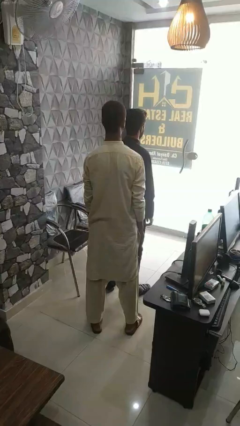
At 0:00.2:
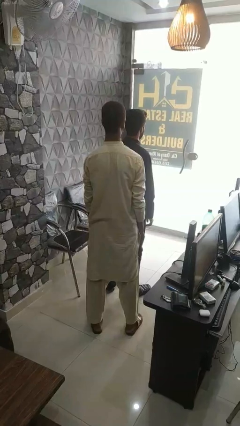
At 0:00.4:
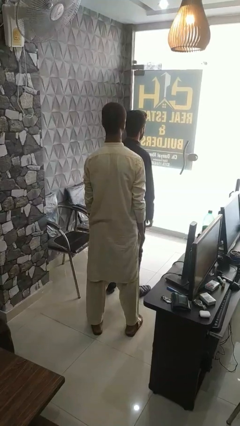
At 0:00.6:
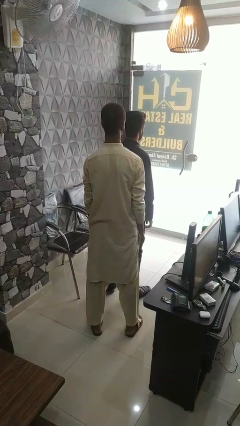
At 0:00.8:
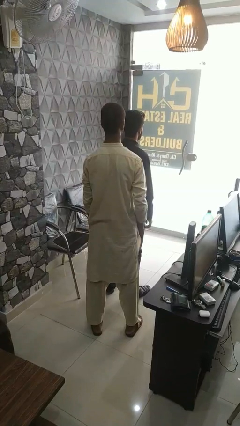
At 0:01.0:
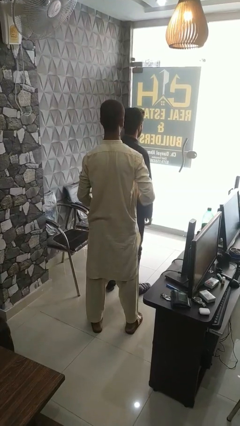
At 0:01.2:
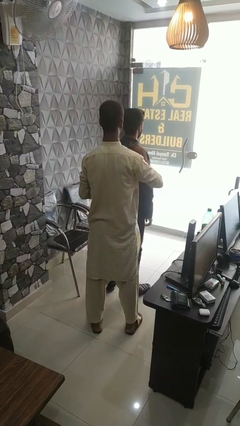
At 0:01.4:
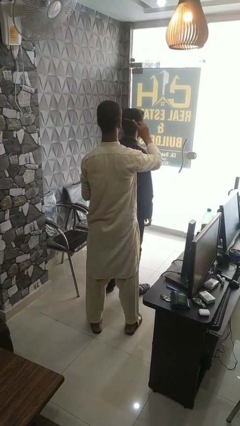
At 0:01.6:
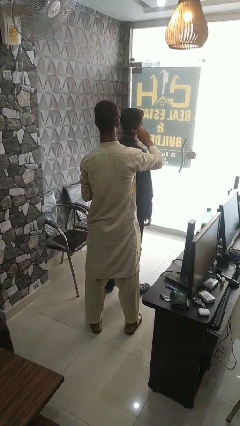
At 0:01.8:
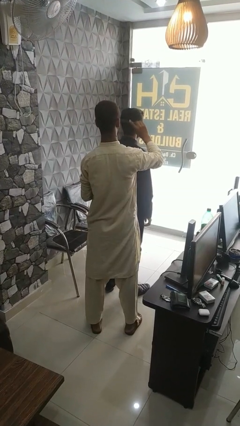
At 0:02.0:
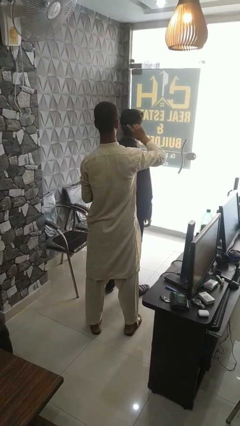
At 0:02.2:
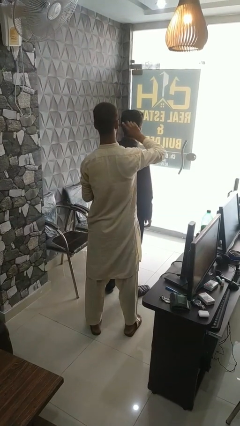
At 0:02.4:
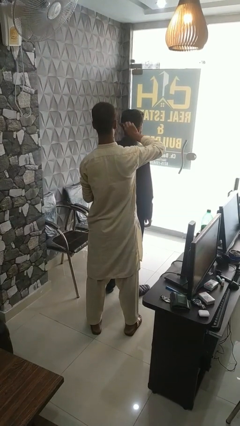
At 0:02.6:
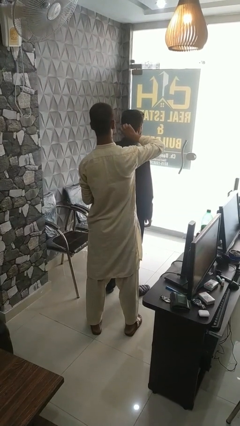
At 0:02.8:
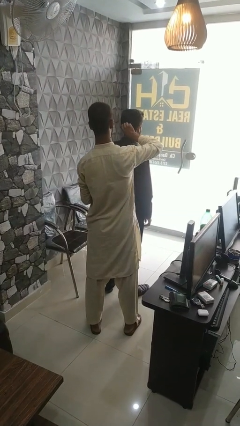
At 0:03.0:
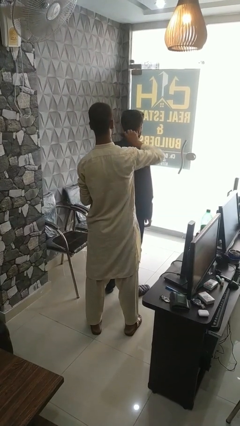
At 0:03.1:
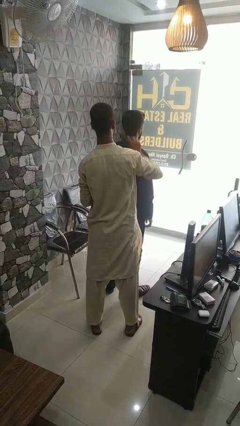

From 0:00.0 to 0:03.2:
person brushes hair of person

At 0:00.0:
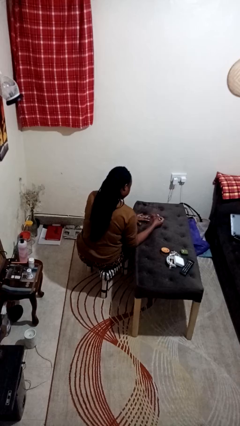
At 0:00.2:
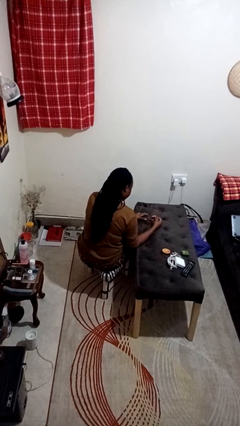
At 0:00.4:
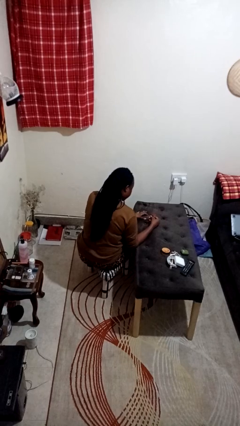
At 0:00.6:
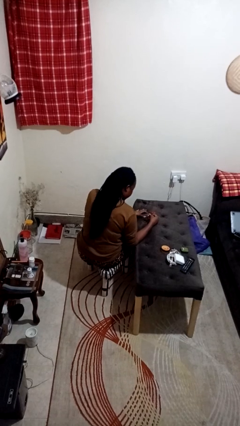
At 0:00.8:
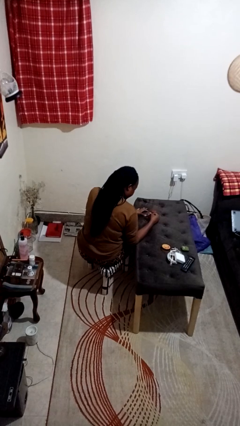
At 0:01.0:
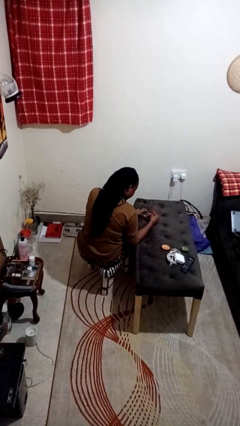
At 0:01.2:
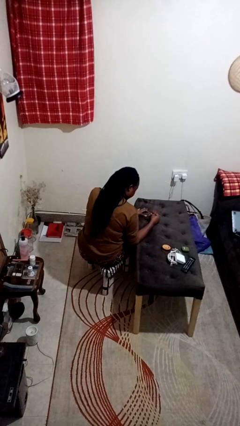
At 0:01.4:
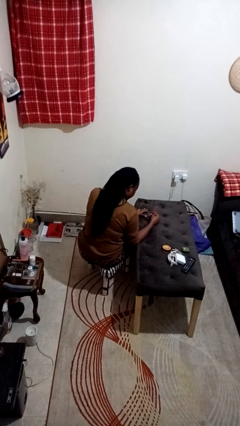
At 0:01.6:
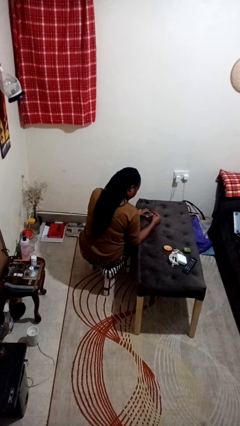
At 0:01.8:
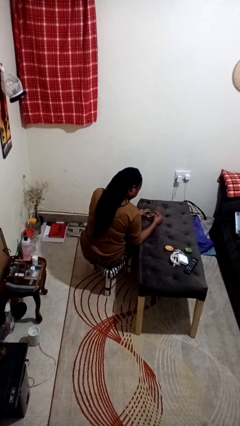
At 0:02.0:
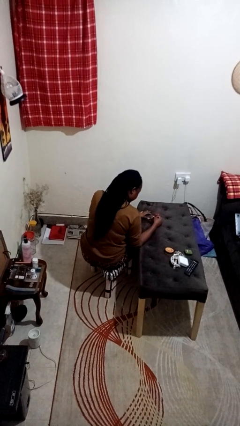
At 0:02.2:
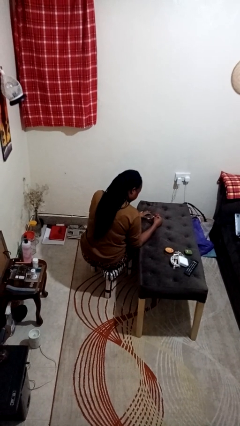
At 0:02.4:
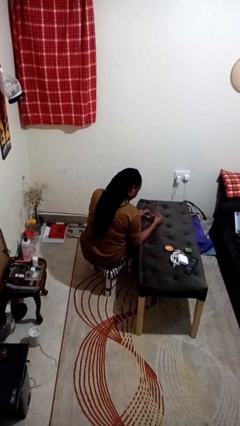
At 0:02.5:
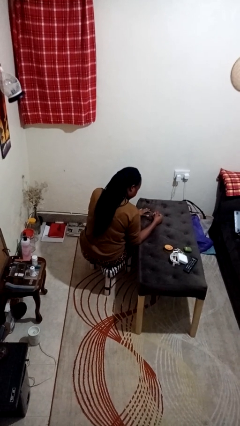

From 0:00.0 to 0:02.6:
person paints fingernails

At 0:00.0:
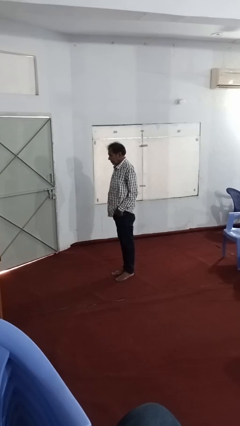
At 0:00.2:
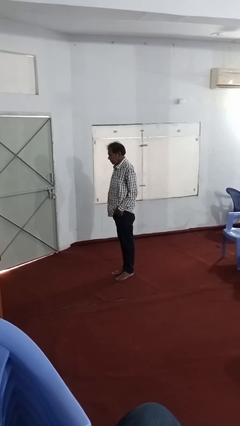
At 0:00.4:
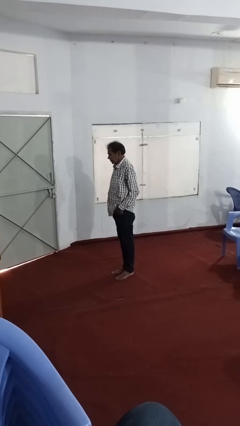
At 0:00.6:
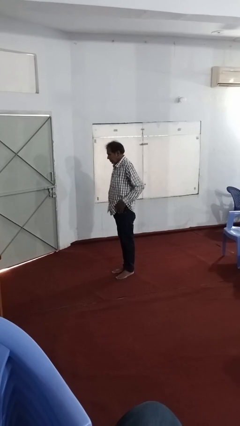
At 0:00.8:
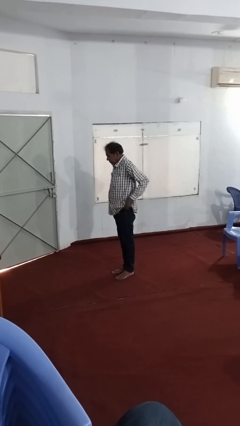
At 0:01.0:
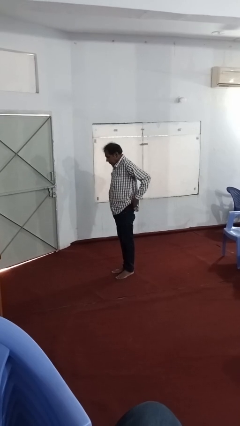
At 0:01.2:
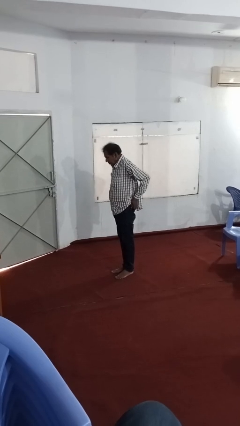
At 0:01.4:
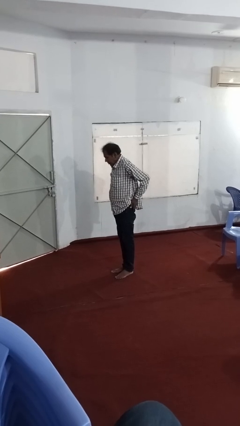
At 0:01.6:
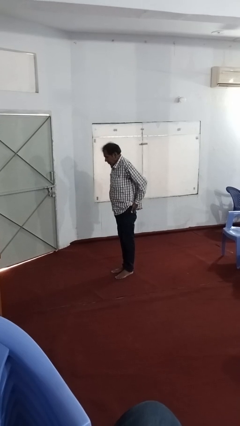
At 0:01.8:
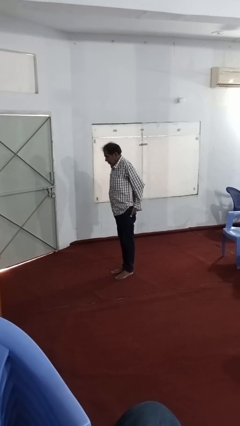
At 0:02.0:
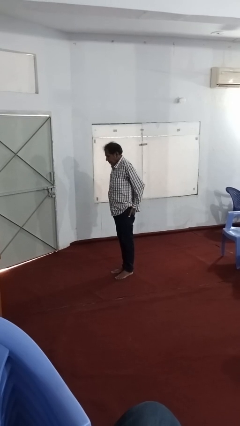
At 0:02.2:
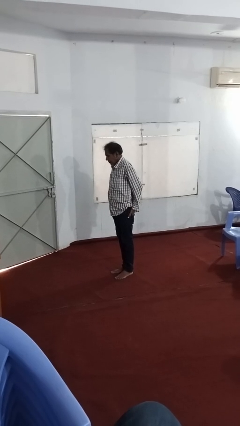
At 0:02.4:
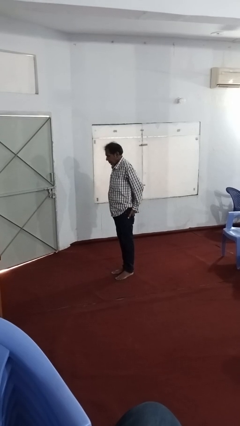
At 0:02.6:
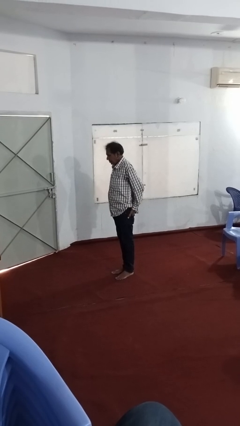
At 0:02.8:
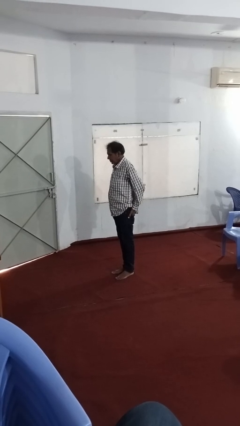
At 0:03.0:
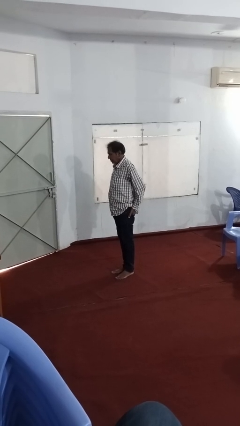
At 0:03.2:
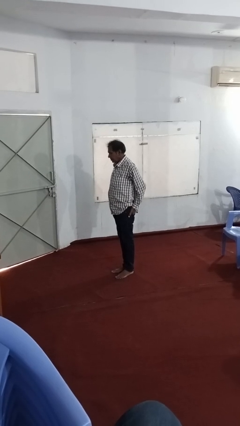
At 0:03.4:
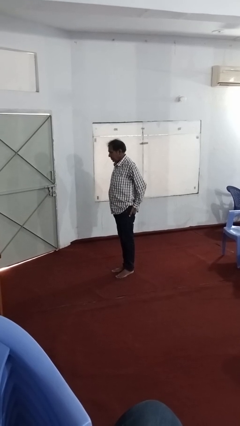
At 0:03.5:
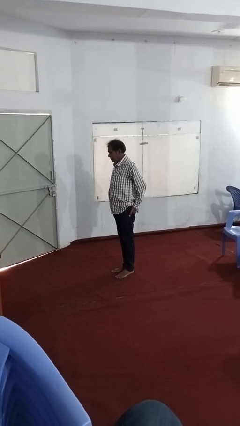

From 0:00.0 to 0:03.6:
person puts hands in back pockets

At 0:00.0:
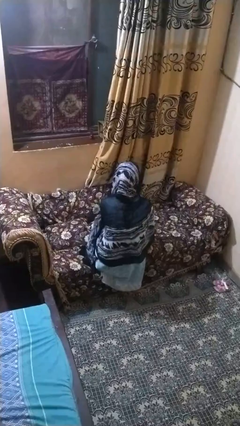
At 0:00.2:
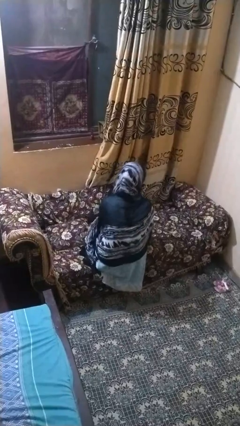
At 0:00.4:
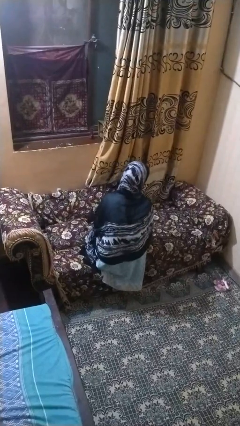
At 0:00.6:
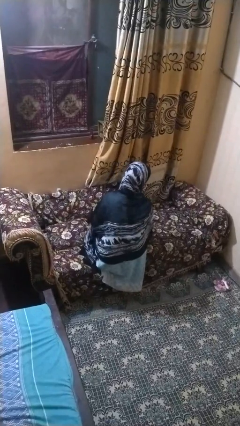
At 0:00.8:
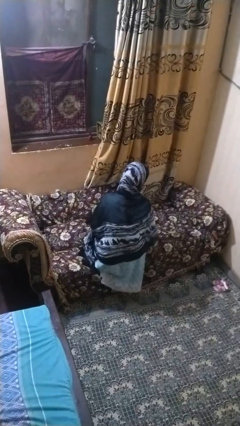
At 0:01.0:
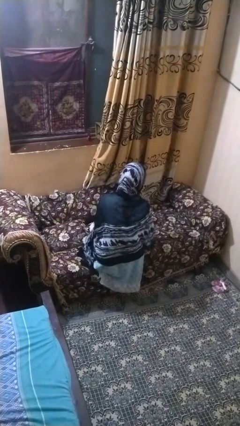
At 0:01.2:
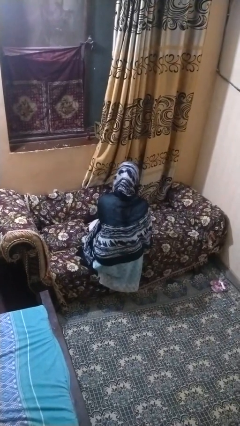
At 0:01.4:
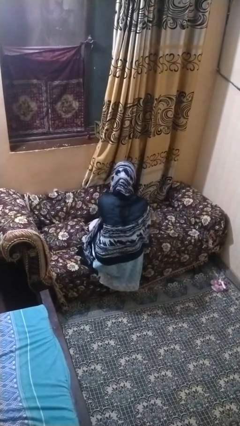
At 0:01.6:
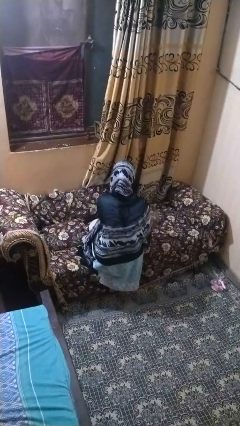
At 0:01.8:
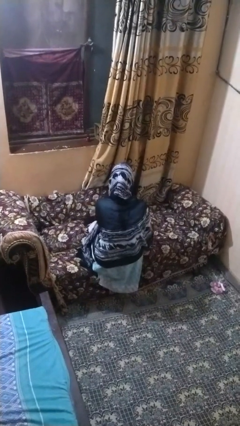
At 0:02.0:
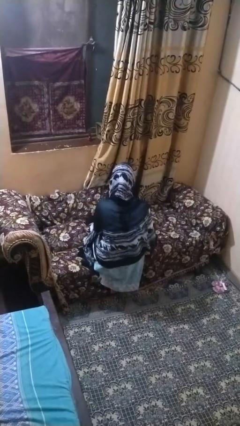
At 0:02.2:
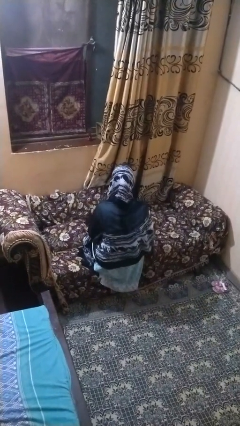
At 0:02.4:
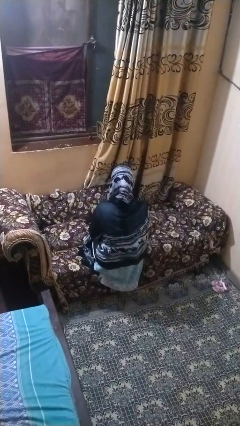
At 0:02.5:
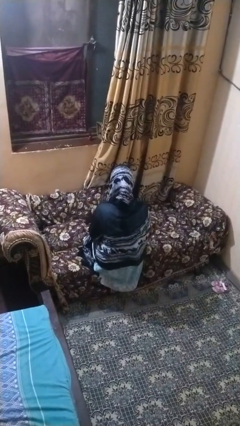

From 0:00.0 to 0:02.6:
person searches in couch

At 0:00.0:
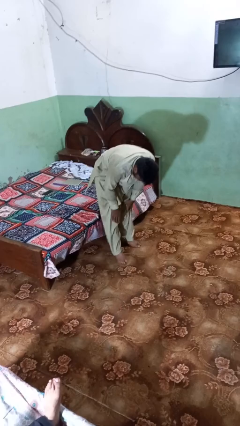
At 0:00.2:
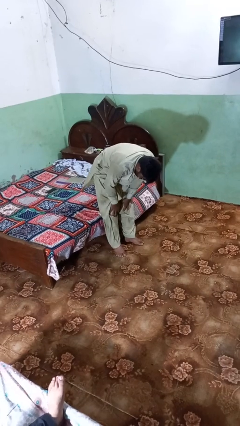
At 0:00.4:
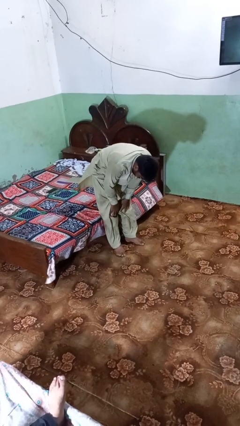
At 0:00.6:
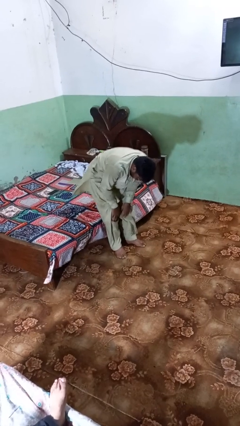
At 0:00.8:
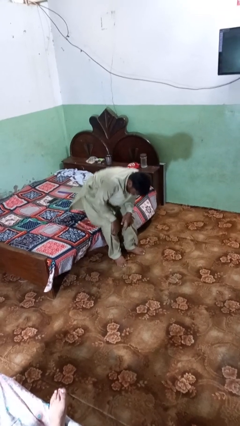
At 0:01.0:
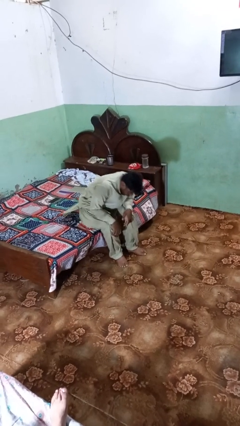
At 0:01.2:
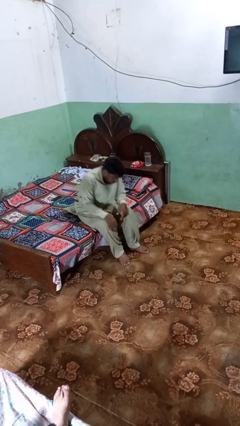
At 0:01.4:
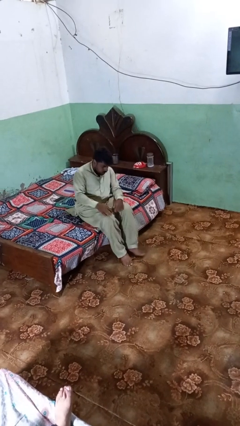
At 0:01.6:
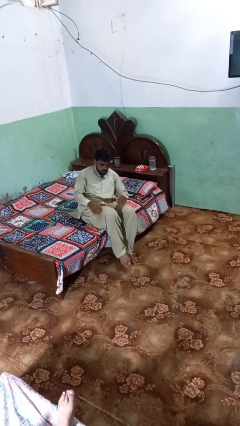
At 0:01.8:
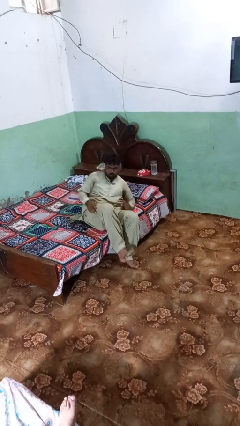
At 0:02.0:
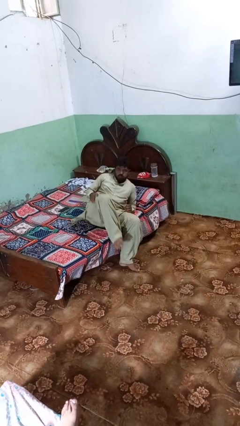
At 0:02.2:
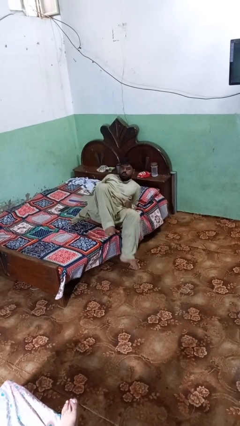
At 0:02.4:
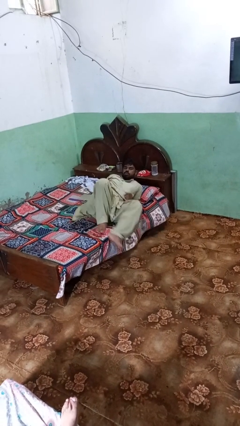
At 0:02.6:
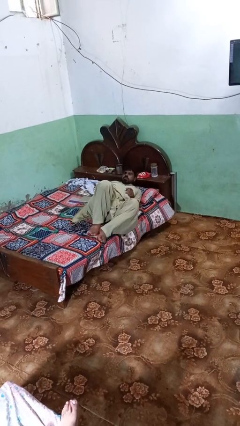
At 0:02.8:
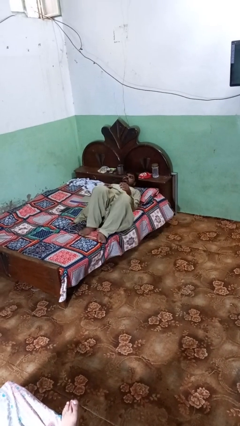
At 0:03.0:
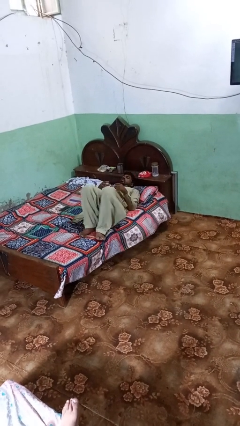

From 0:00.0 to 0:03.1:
person lies down on bed

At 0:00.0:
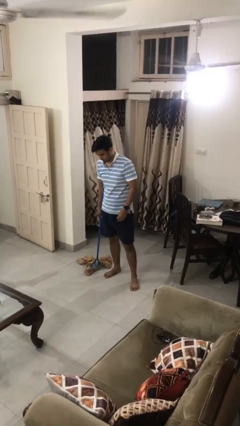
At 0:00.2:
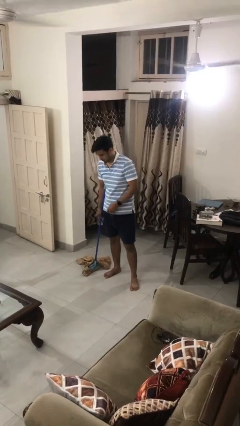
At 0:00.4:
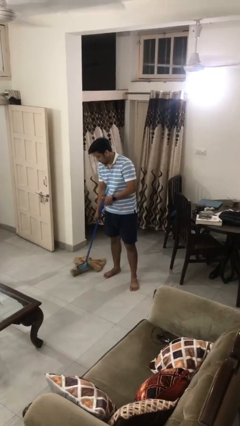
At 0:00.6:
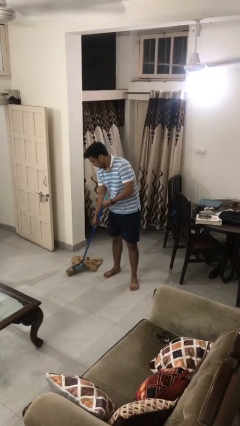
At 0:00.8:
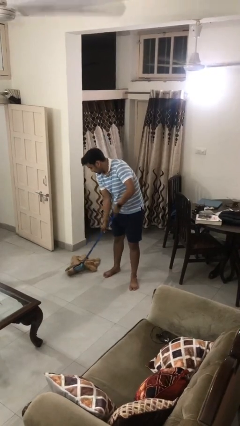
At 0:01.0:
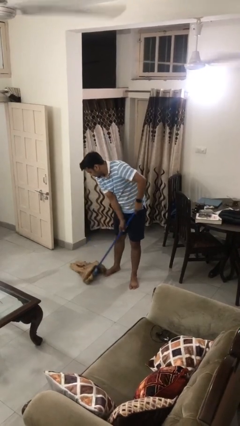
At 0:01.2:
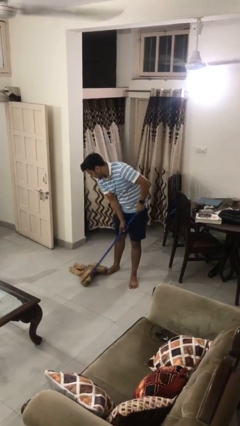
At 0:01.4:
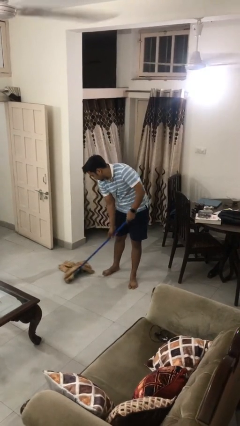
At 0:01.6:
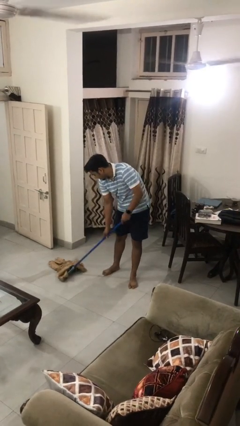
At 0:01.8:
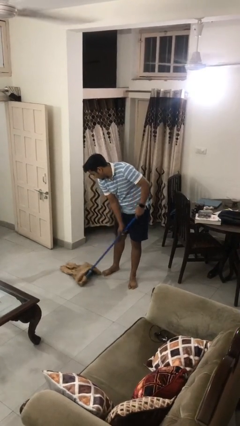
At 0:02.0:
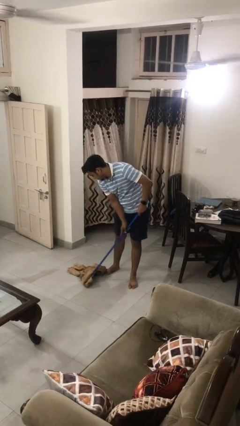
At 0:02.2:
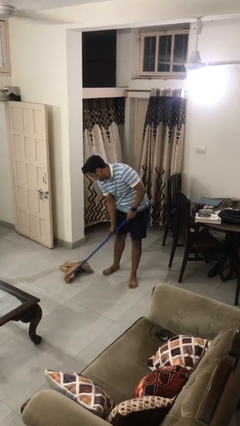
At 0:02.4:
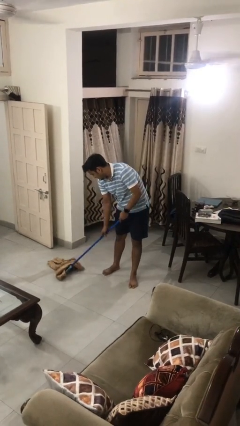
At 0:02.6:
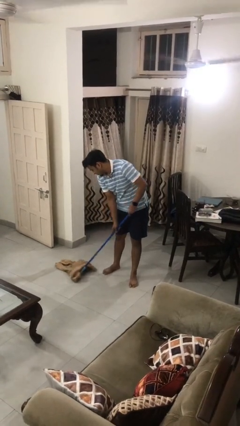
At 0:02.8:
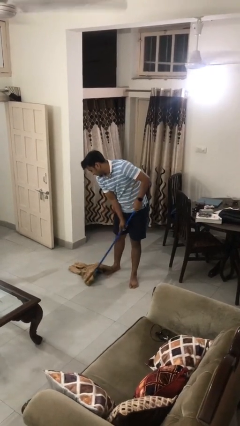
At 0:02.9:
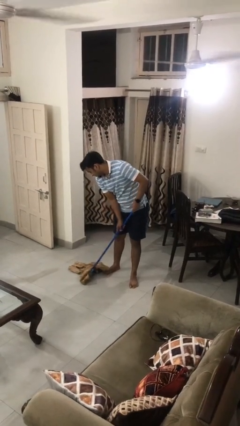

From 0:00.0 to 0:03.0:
person mops
